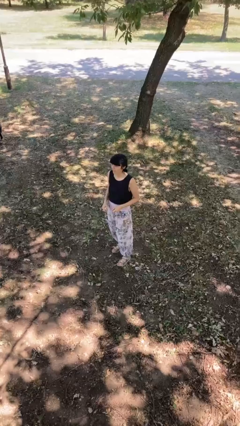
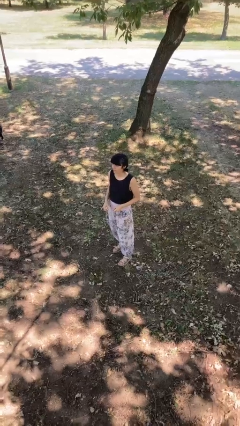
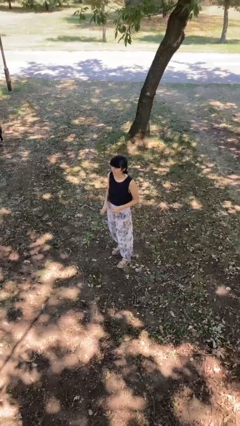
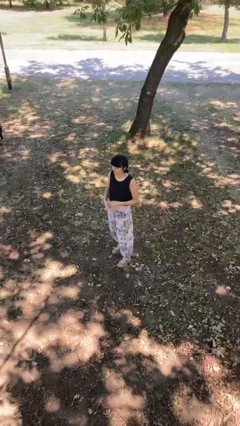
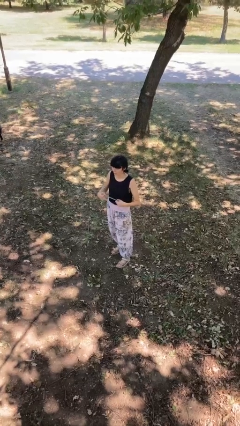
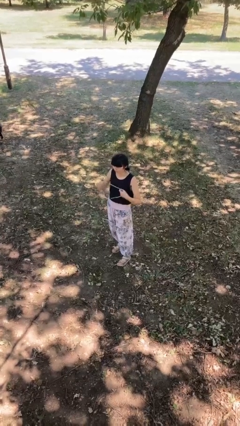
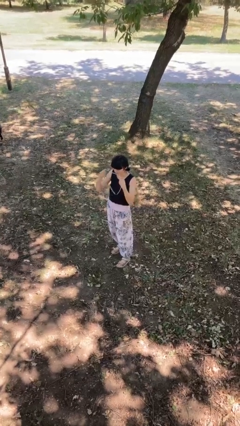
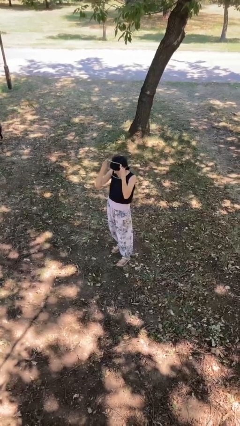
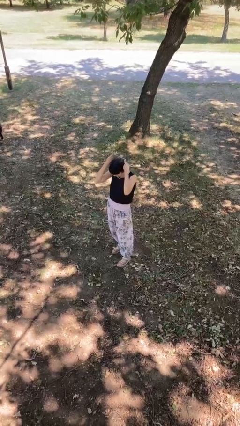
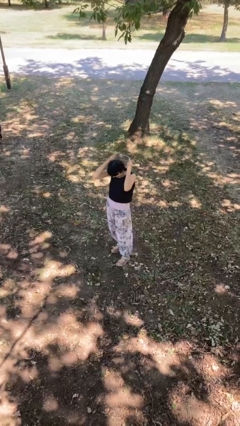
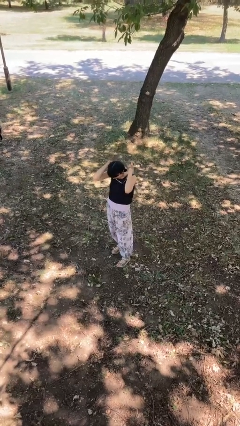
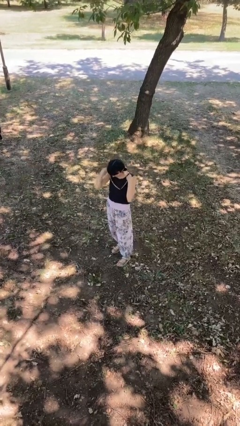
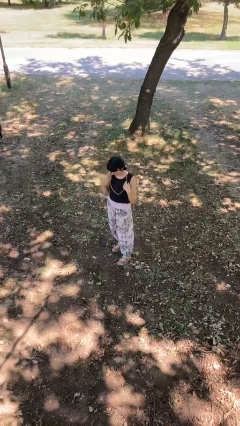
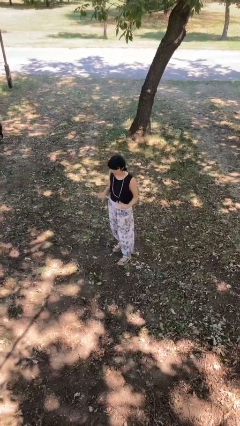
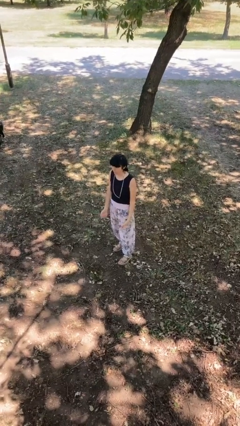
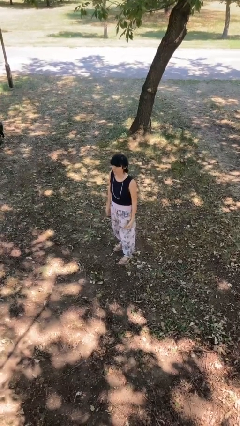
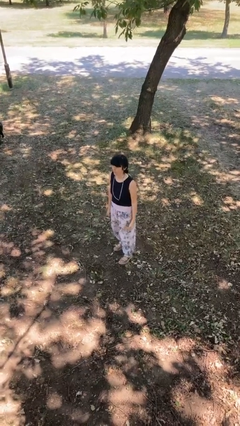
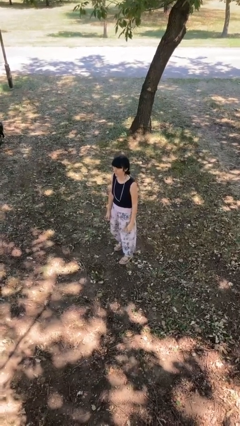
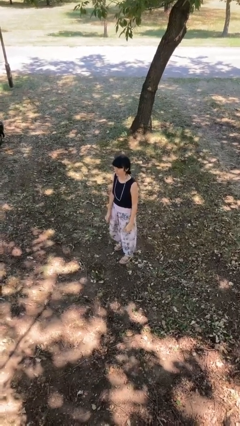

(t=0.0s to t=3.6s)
person puts on necklace

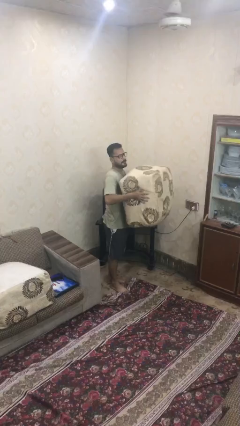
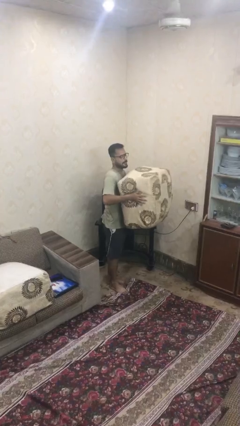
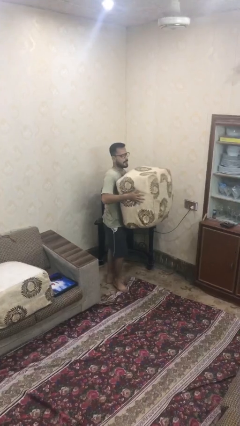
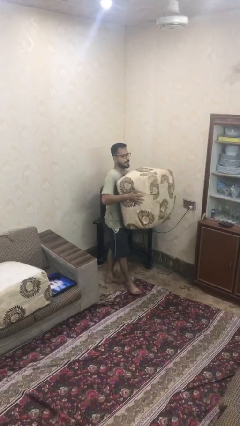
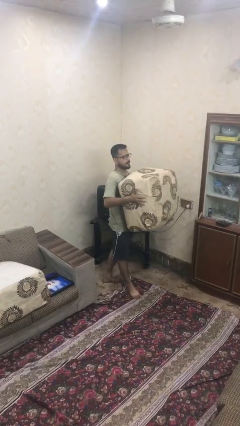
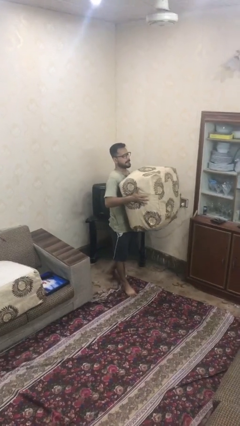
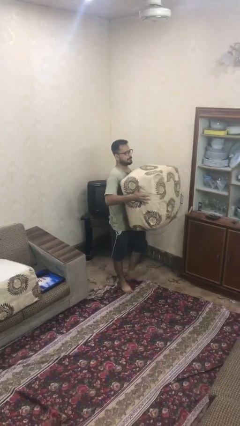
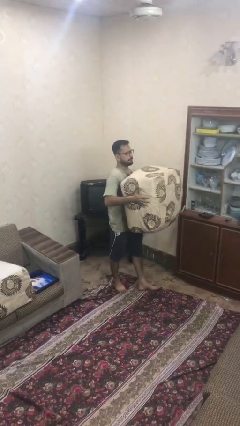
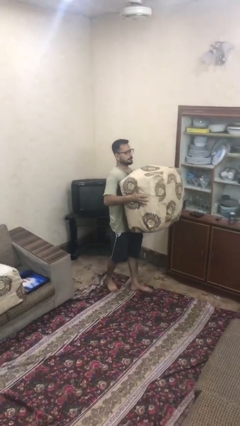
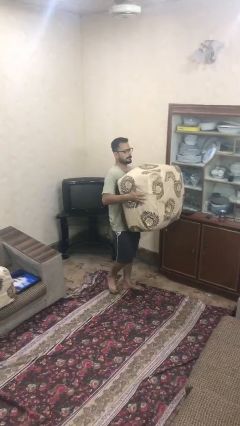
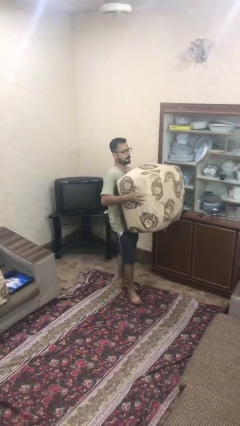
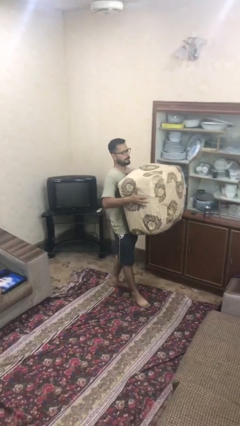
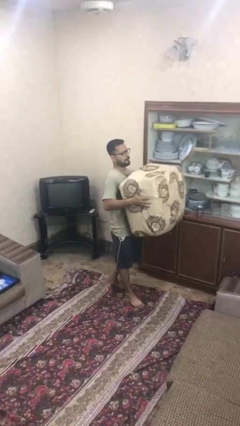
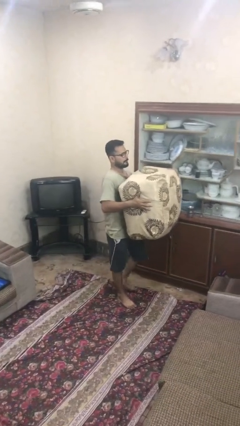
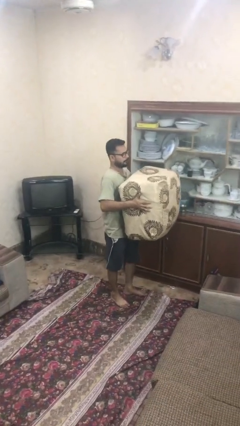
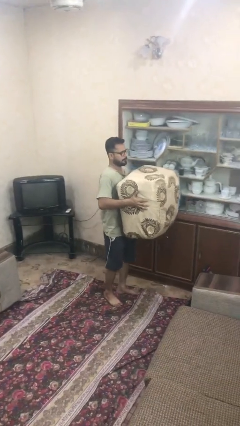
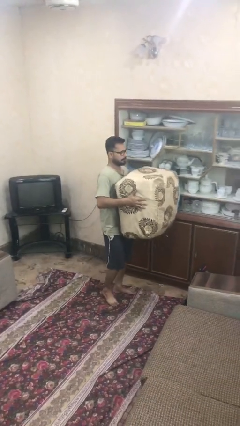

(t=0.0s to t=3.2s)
person carries heavy object

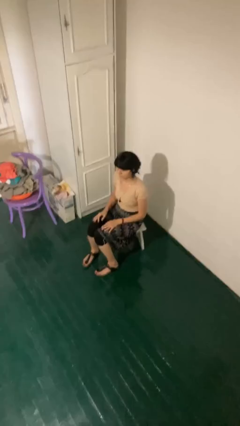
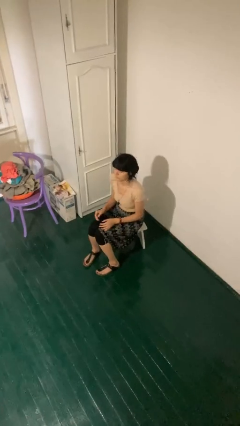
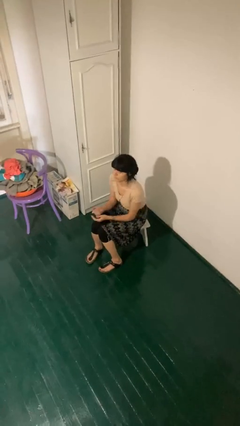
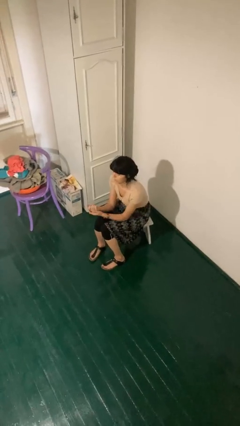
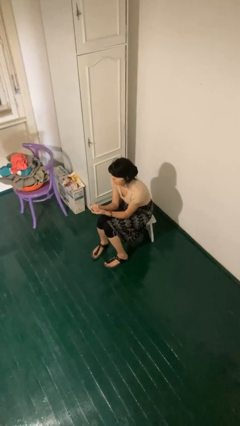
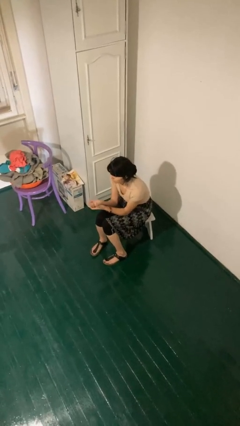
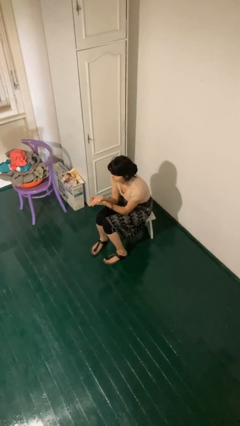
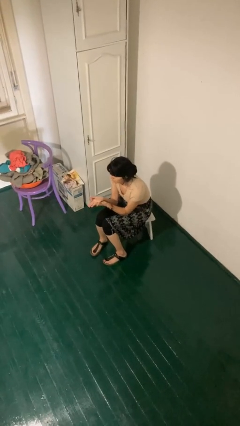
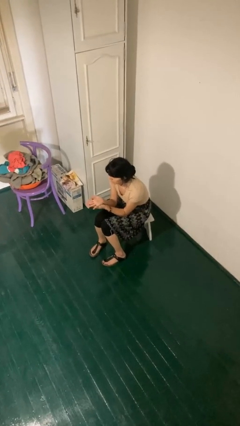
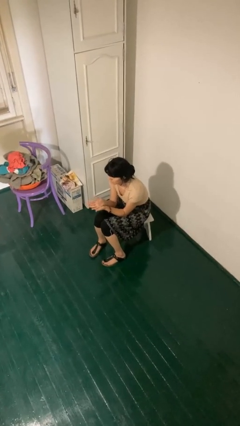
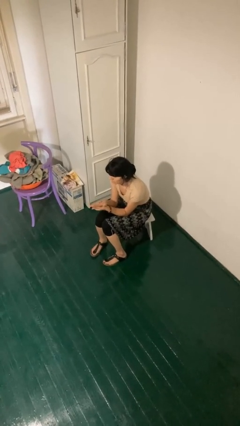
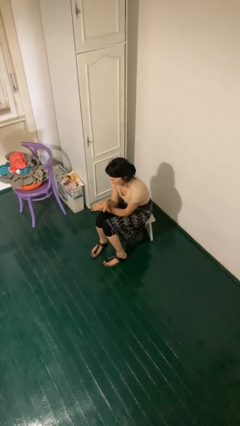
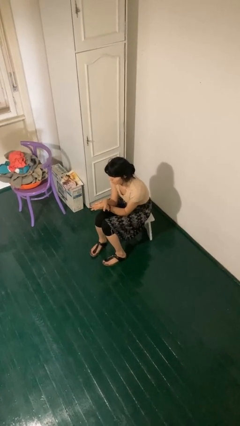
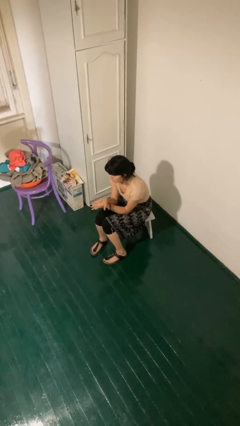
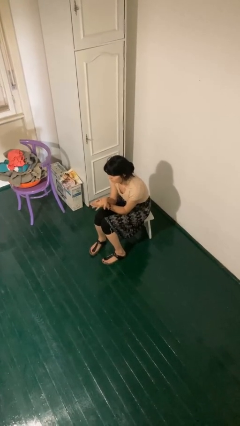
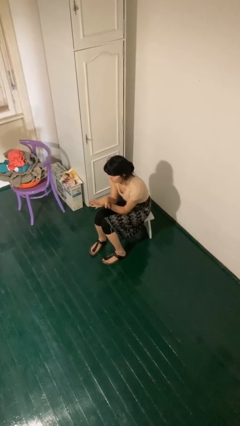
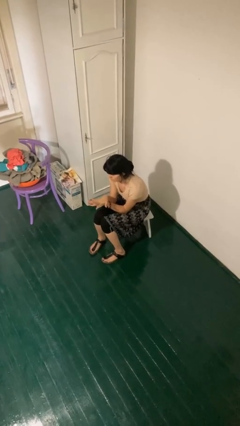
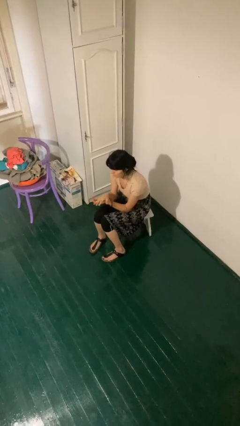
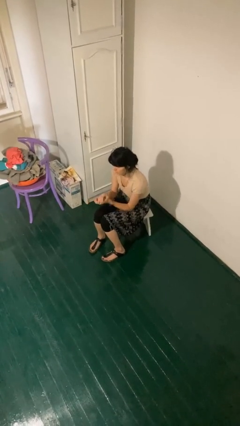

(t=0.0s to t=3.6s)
person looks at hands in lap

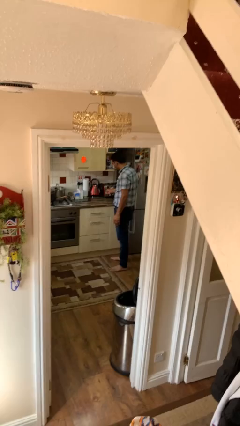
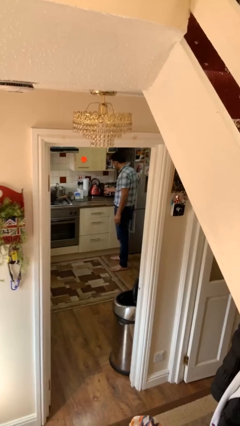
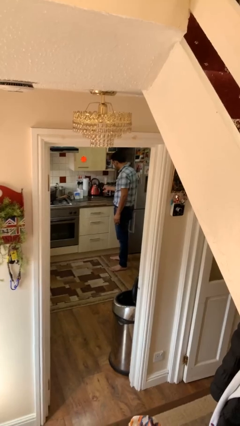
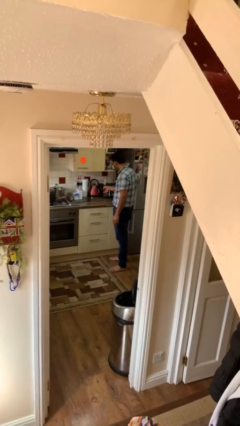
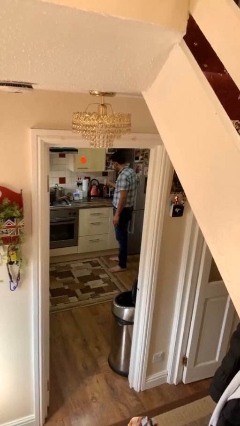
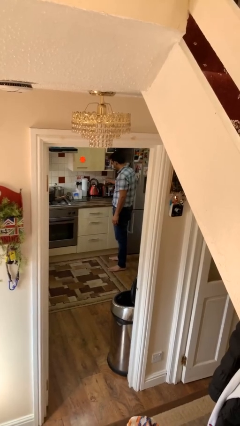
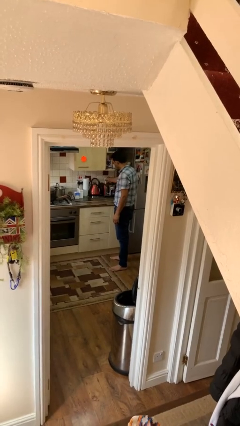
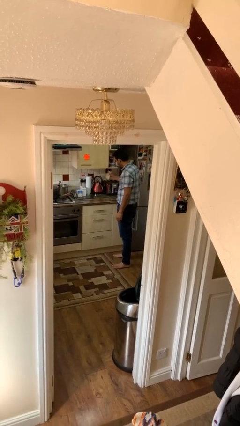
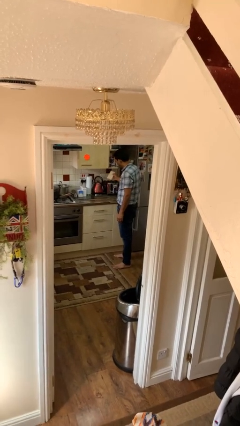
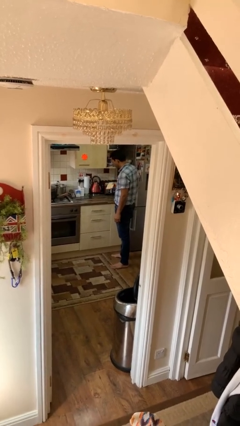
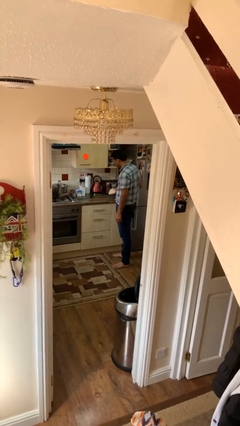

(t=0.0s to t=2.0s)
person takes object from toaster

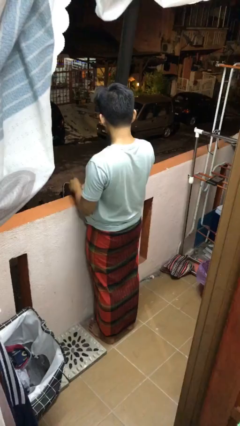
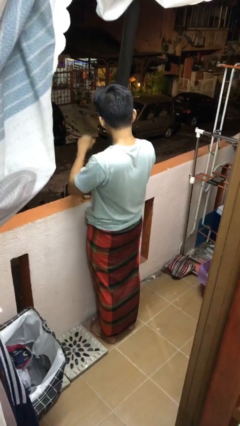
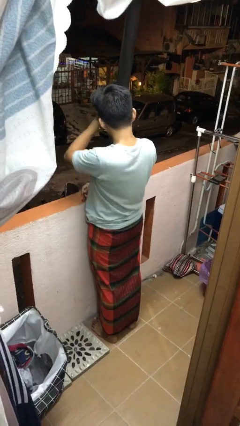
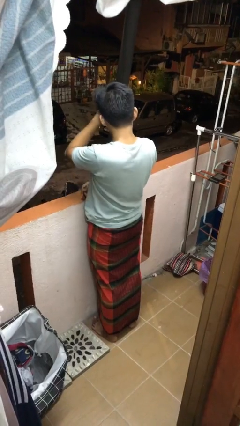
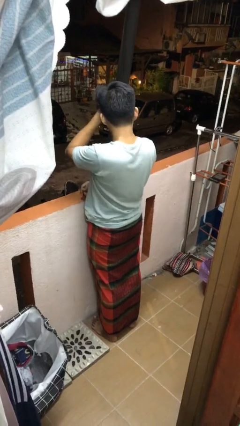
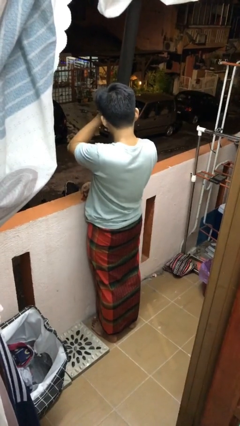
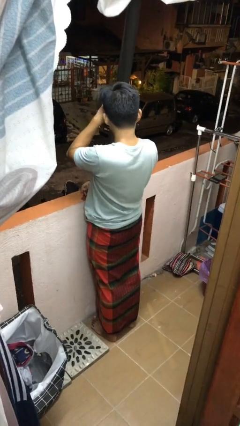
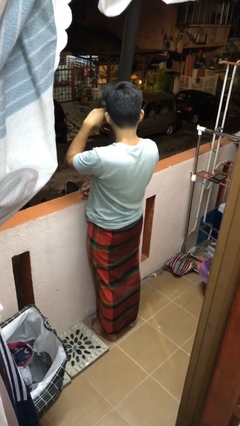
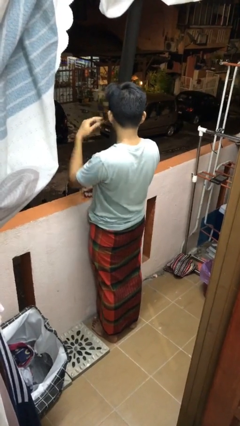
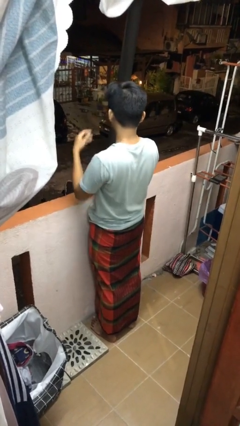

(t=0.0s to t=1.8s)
person rubs eyes

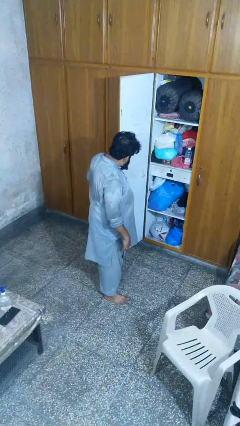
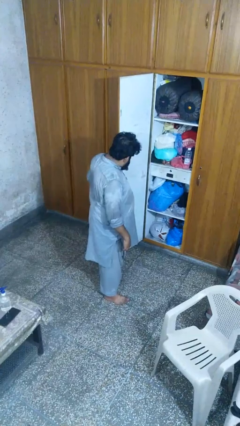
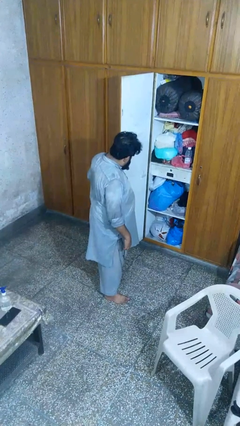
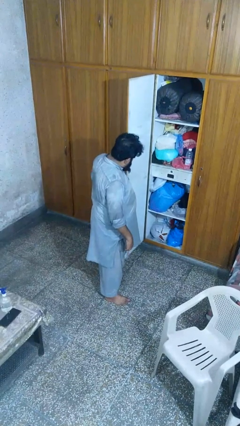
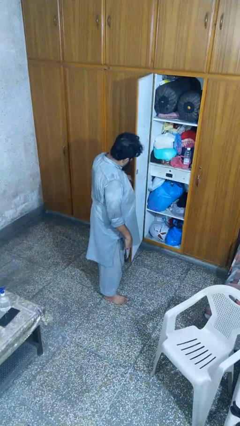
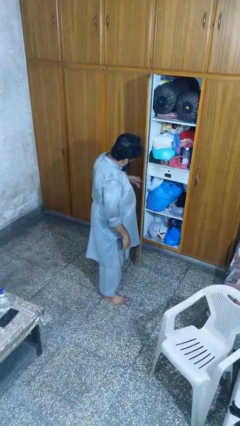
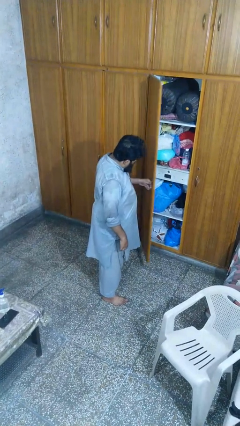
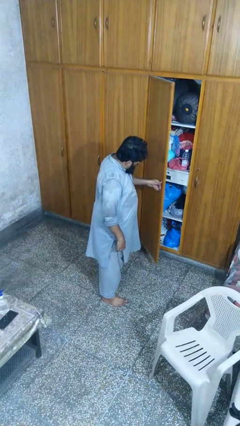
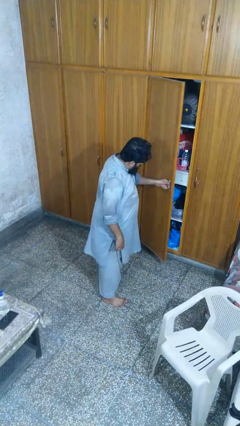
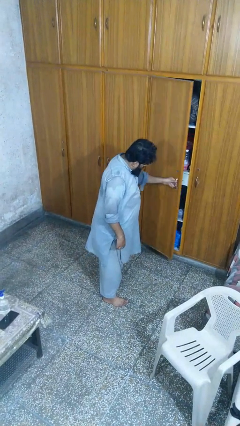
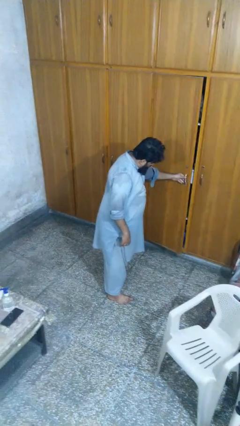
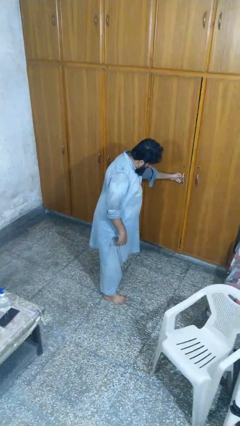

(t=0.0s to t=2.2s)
person closes closet door

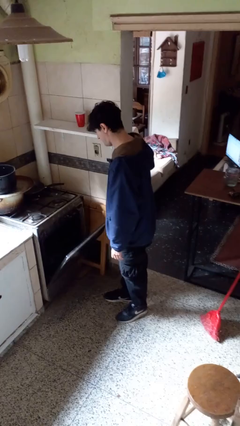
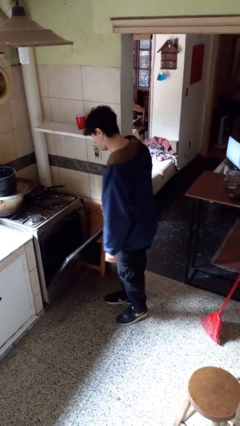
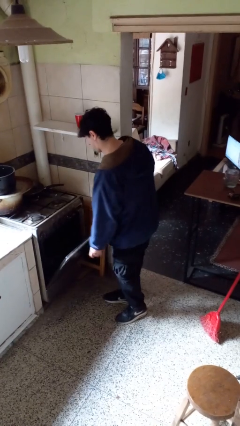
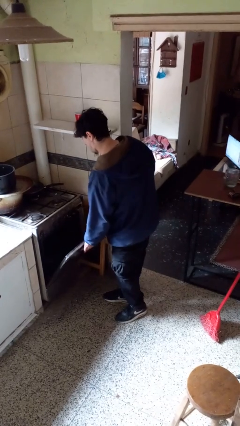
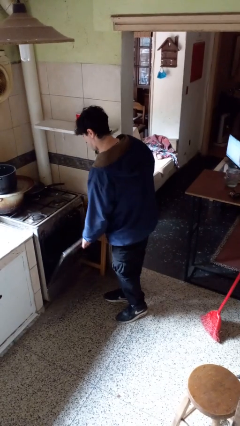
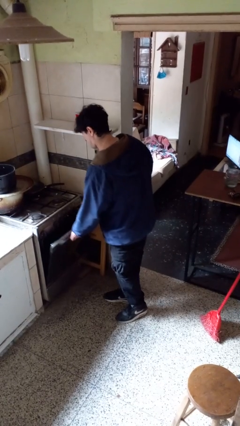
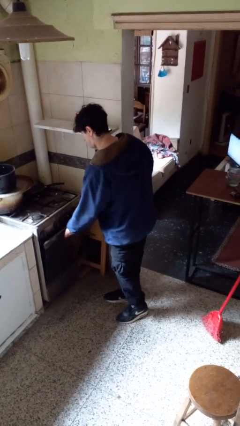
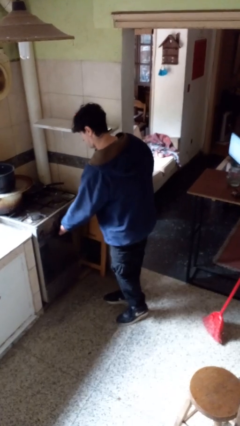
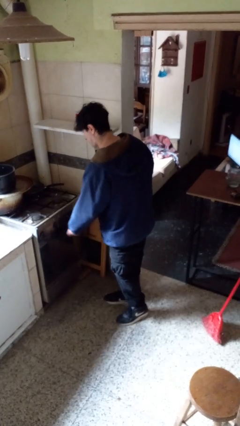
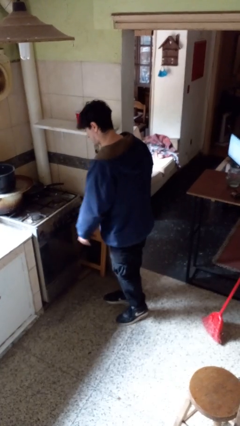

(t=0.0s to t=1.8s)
person closes oven door
